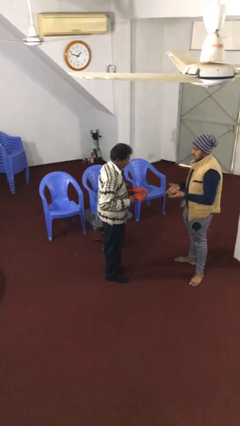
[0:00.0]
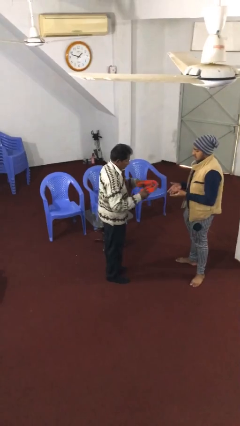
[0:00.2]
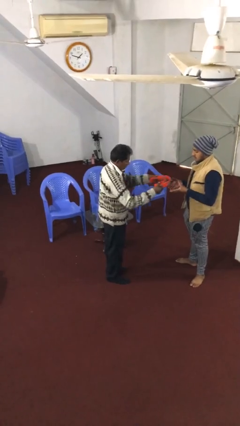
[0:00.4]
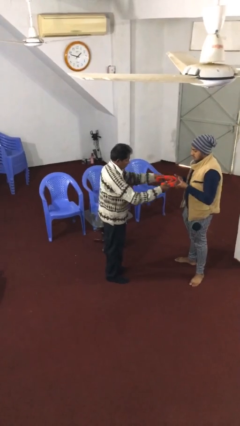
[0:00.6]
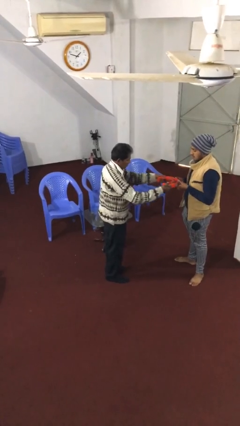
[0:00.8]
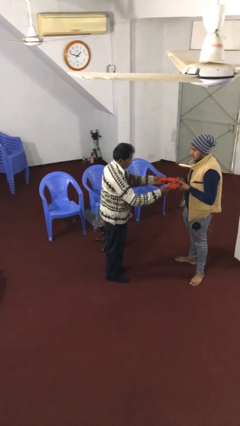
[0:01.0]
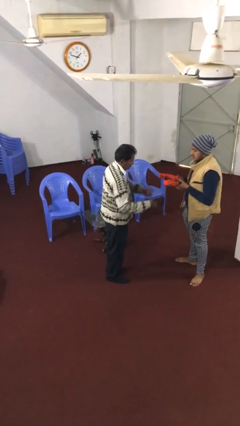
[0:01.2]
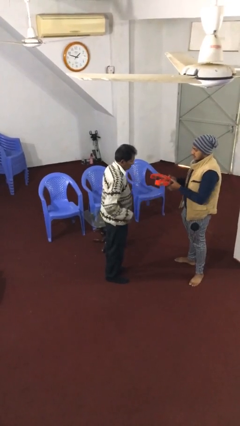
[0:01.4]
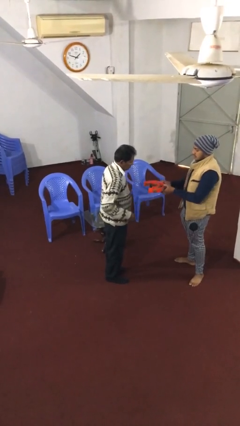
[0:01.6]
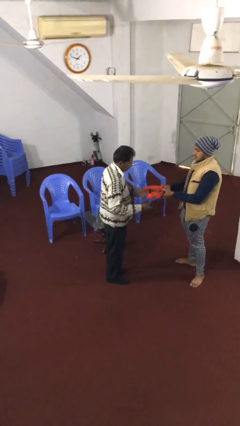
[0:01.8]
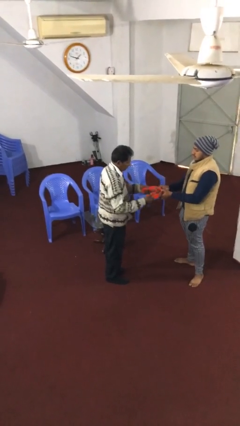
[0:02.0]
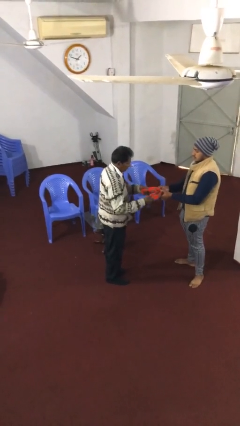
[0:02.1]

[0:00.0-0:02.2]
person transfers object to person

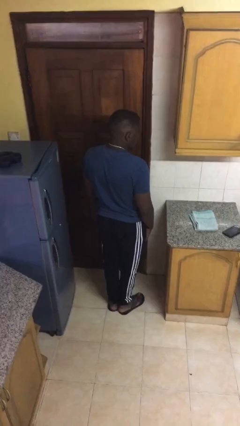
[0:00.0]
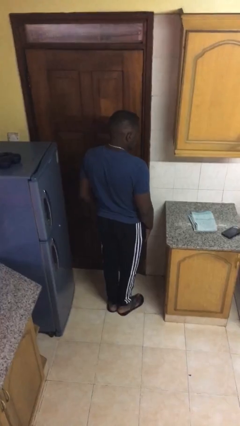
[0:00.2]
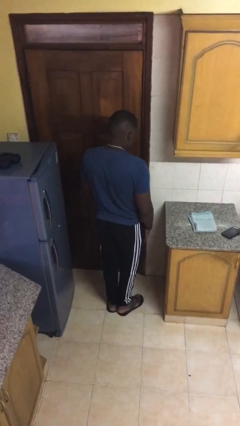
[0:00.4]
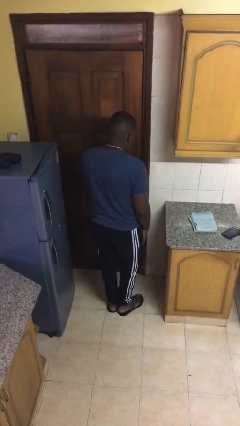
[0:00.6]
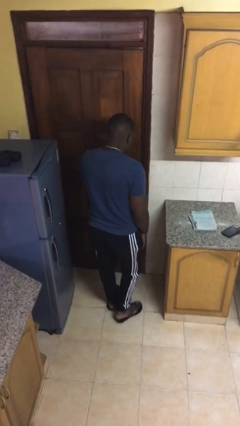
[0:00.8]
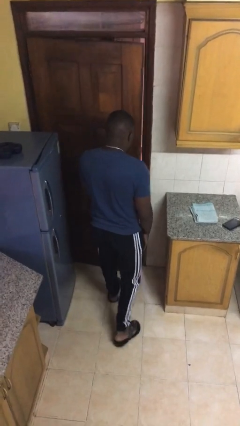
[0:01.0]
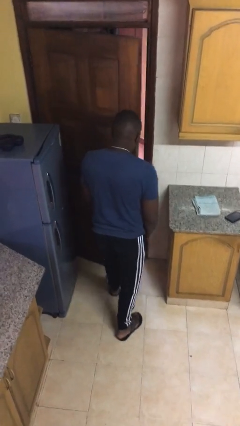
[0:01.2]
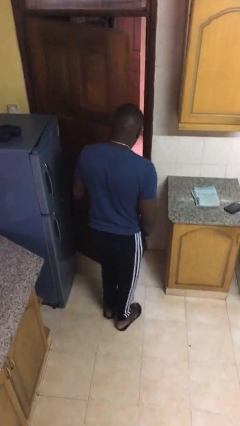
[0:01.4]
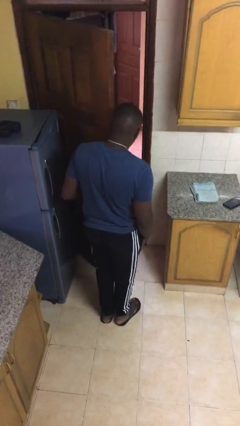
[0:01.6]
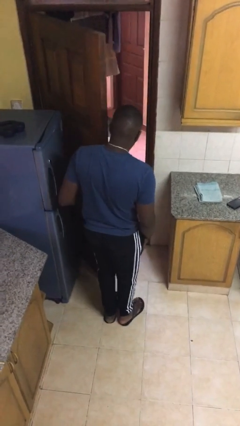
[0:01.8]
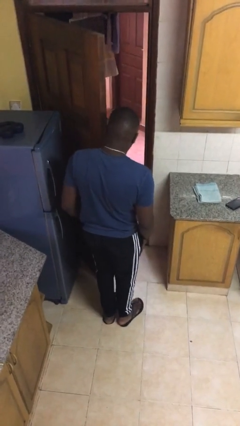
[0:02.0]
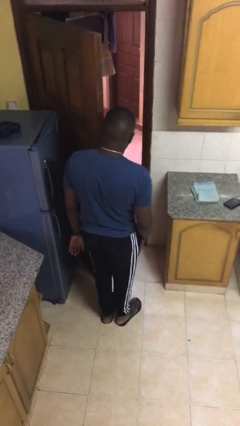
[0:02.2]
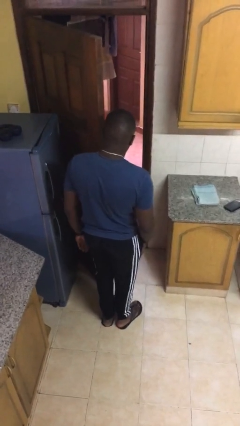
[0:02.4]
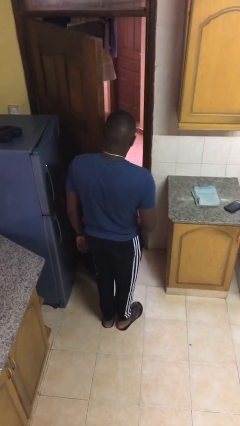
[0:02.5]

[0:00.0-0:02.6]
person opens facility door

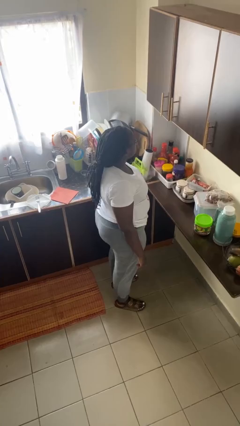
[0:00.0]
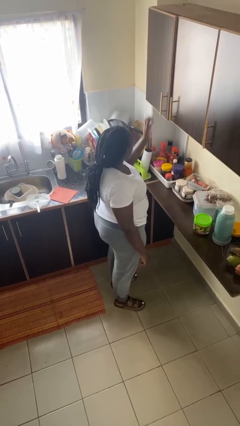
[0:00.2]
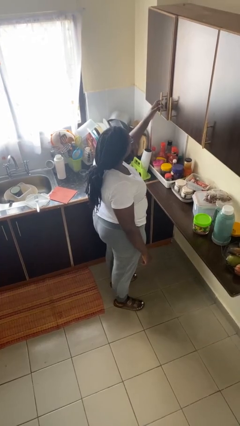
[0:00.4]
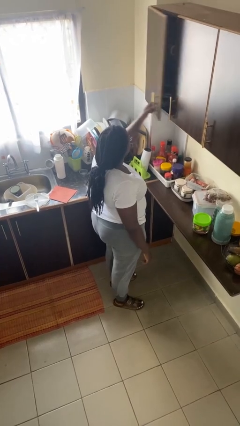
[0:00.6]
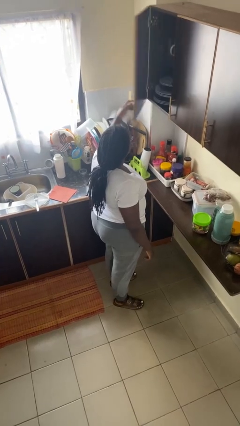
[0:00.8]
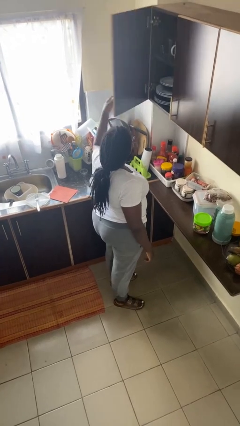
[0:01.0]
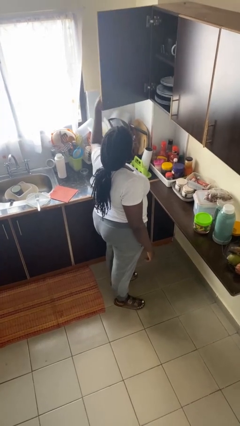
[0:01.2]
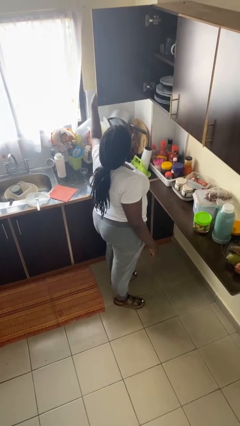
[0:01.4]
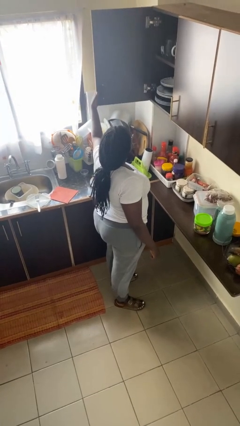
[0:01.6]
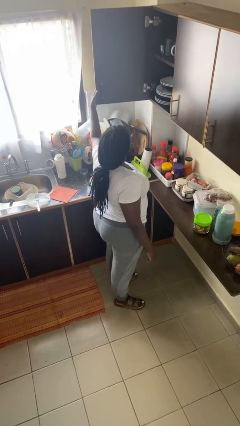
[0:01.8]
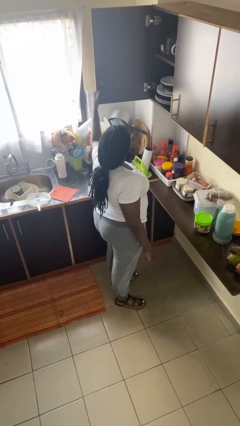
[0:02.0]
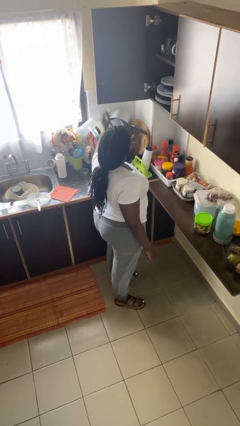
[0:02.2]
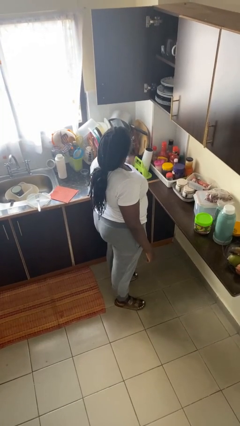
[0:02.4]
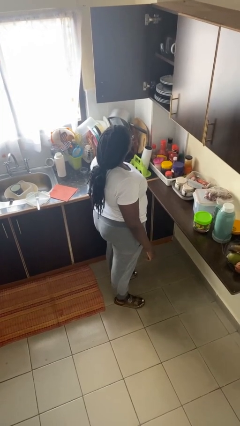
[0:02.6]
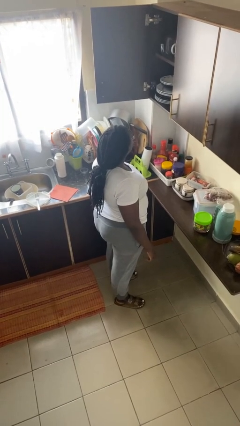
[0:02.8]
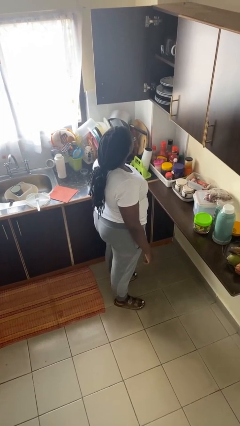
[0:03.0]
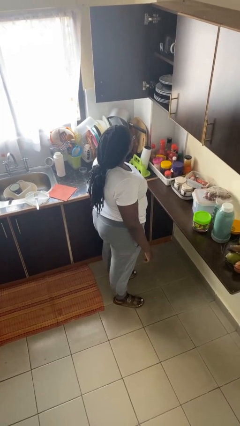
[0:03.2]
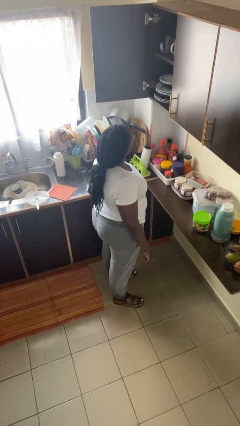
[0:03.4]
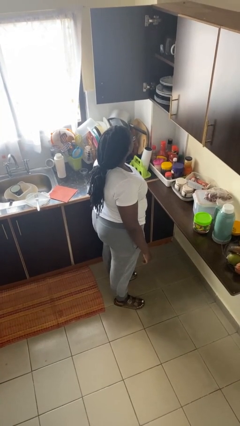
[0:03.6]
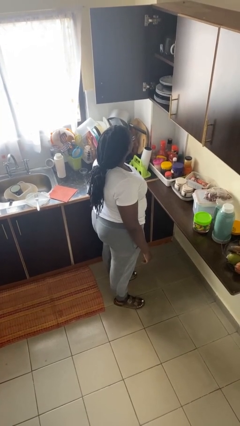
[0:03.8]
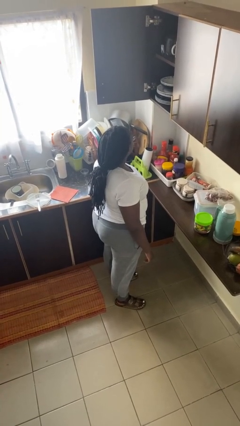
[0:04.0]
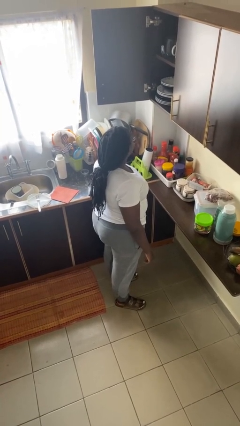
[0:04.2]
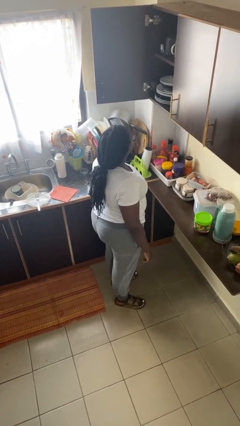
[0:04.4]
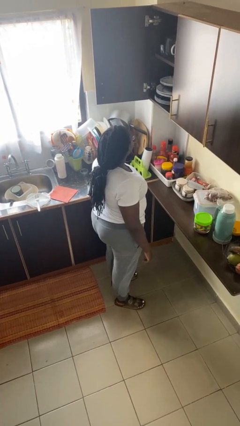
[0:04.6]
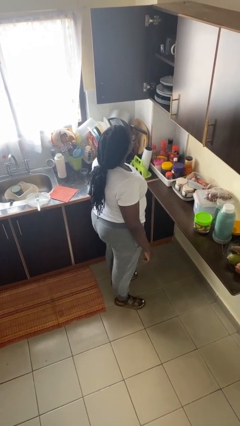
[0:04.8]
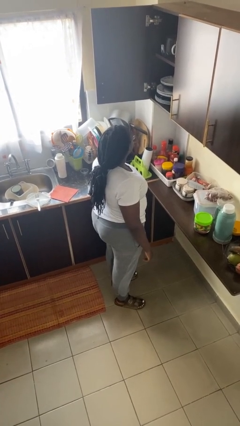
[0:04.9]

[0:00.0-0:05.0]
person opens cabinet

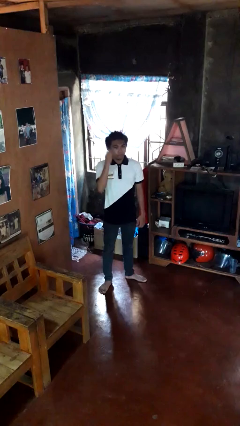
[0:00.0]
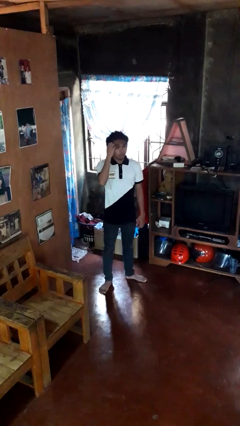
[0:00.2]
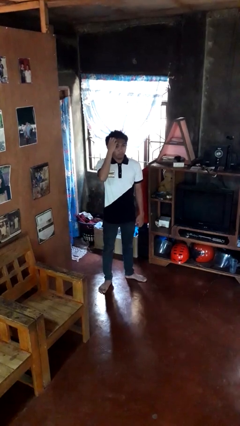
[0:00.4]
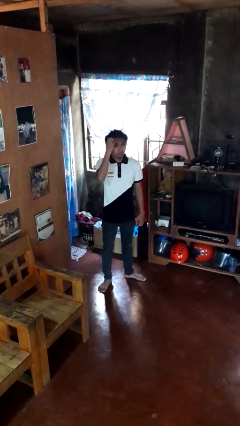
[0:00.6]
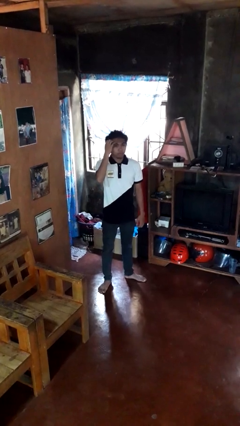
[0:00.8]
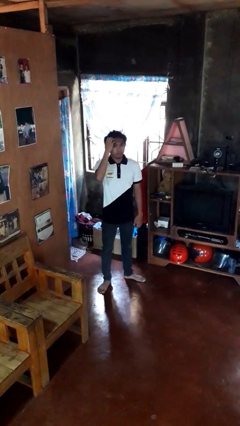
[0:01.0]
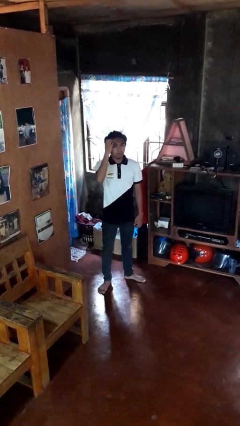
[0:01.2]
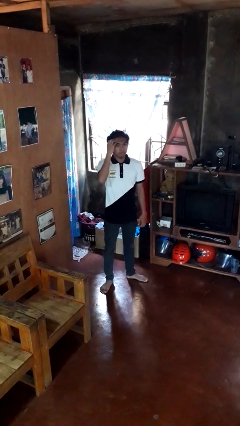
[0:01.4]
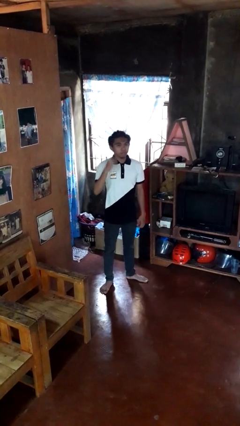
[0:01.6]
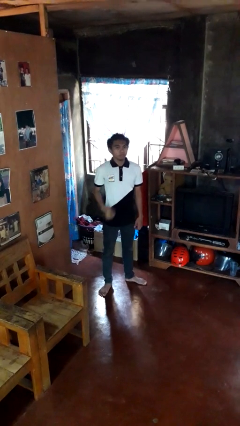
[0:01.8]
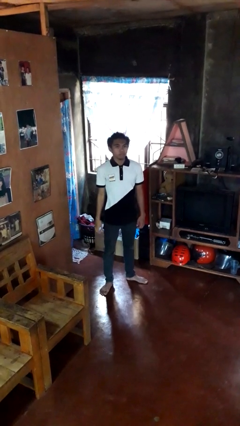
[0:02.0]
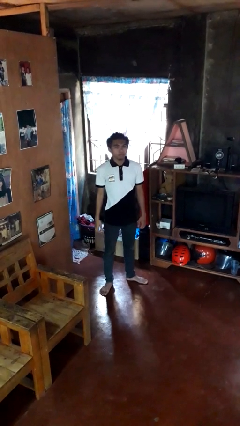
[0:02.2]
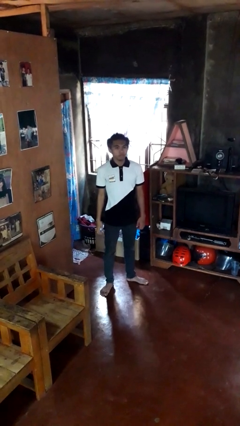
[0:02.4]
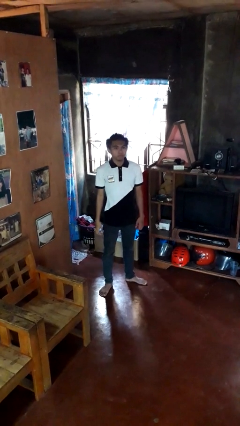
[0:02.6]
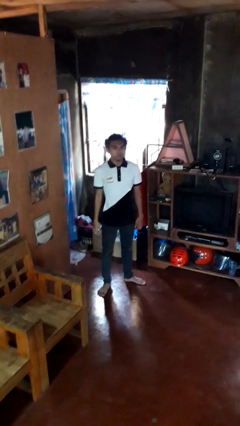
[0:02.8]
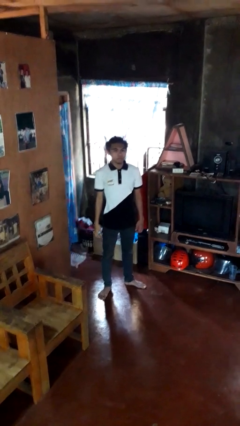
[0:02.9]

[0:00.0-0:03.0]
person scratches face

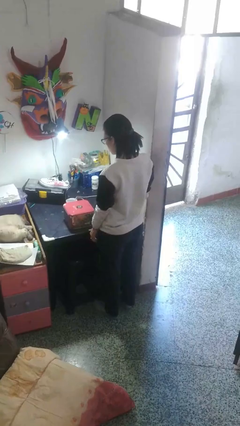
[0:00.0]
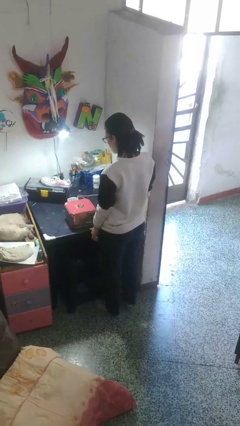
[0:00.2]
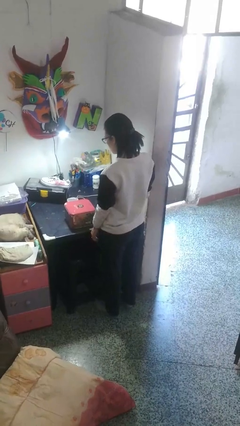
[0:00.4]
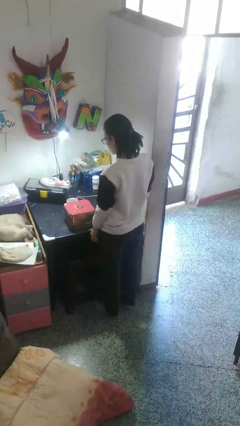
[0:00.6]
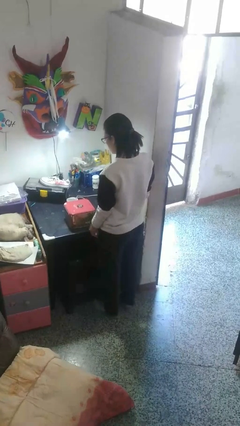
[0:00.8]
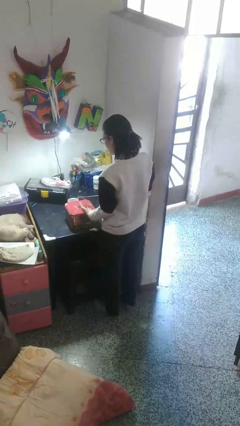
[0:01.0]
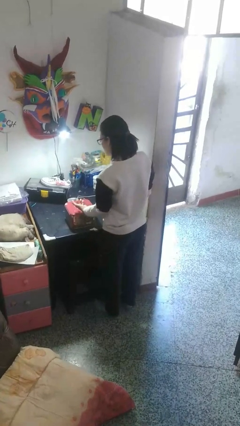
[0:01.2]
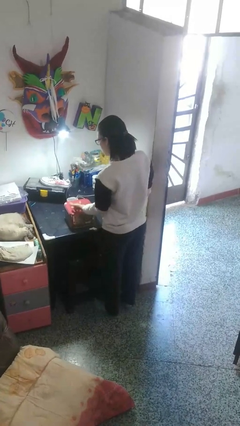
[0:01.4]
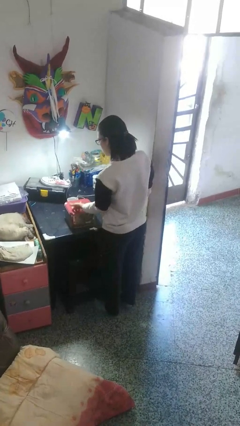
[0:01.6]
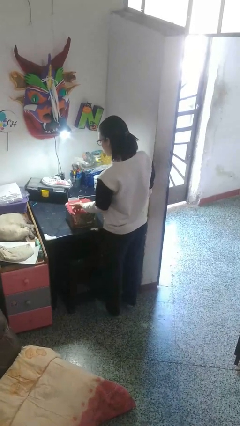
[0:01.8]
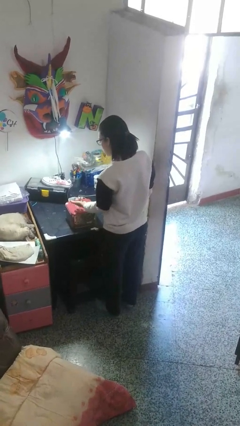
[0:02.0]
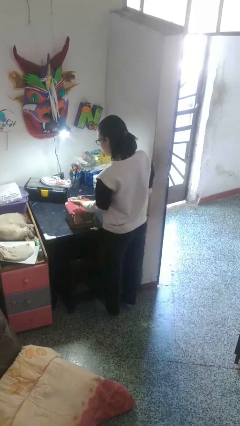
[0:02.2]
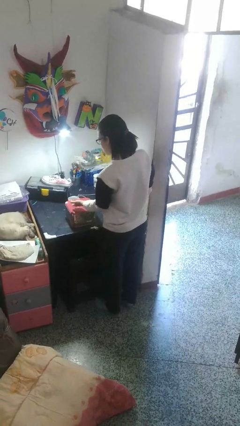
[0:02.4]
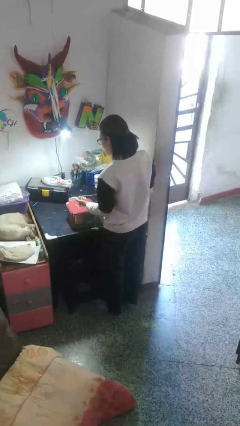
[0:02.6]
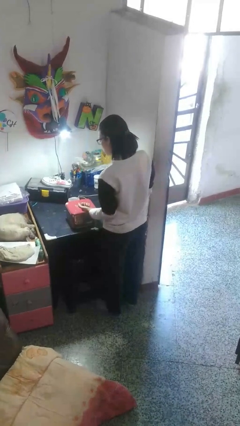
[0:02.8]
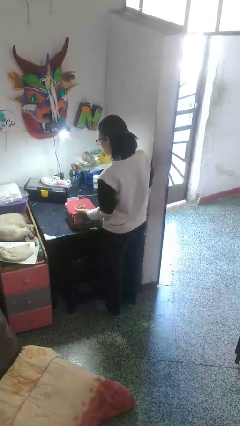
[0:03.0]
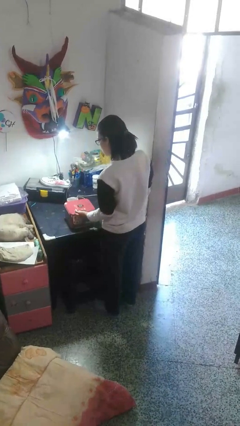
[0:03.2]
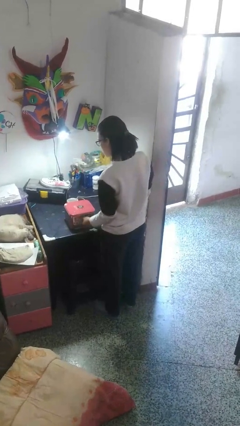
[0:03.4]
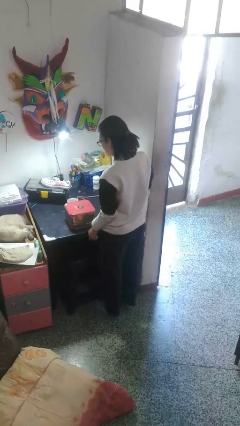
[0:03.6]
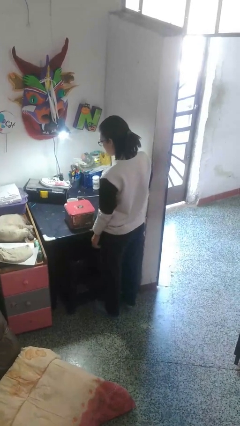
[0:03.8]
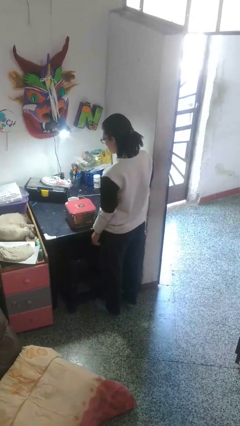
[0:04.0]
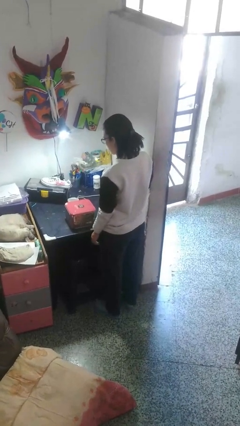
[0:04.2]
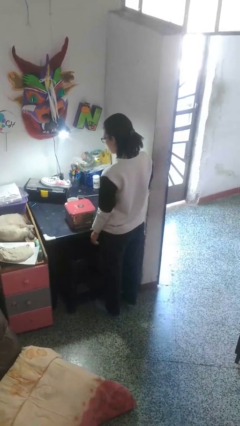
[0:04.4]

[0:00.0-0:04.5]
person taps object with finger

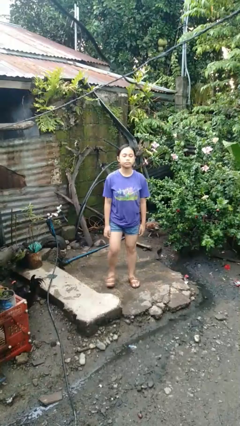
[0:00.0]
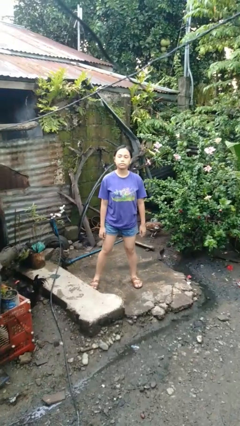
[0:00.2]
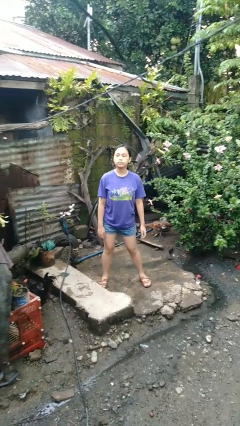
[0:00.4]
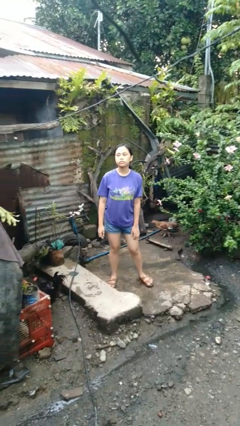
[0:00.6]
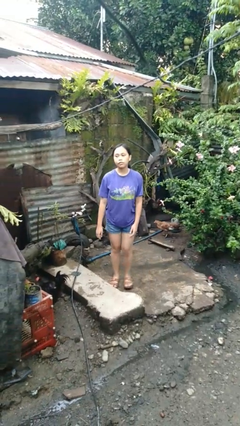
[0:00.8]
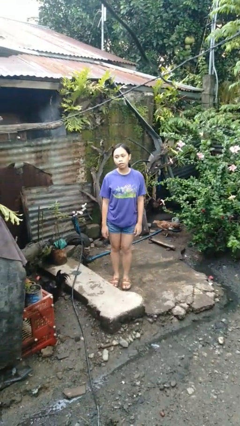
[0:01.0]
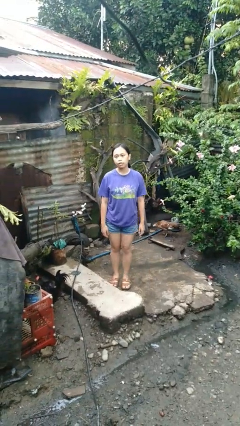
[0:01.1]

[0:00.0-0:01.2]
person shrugs
